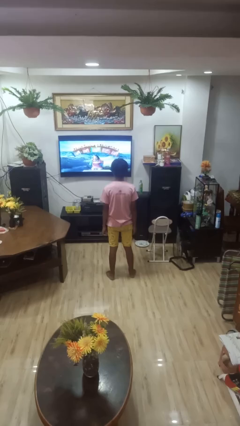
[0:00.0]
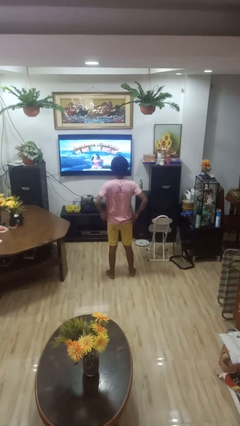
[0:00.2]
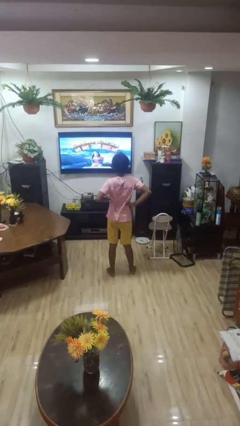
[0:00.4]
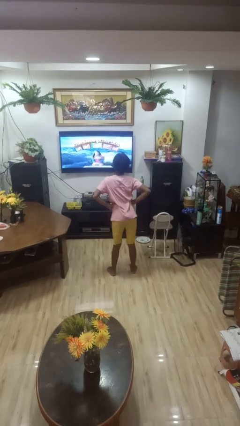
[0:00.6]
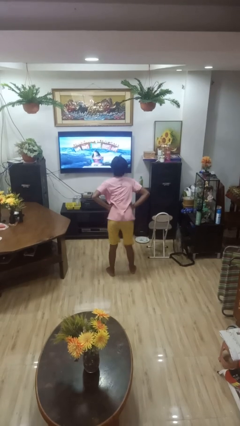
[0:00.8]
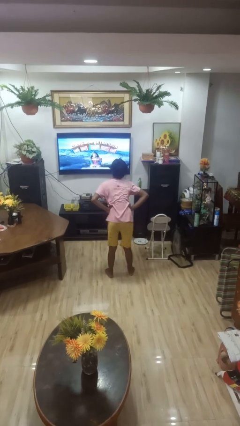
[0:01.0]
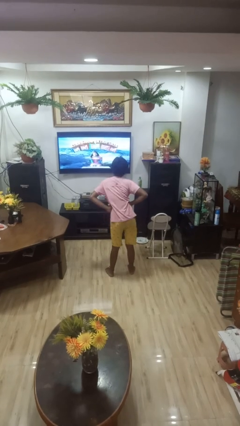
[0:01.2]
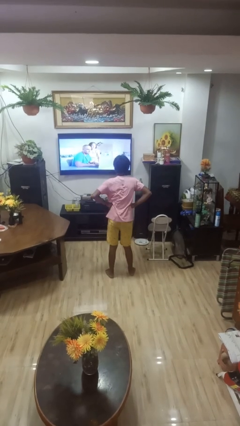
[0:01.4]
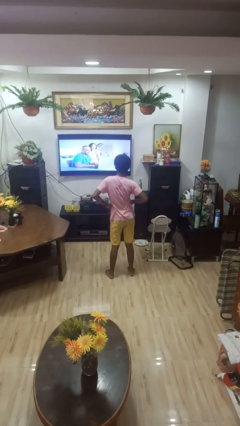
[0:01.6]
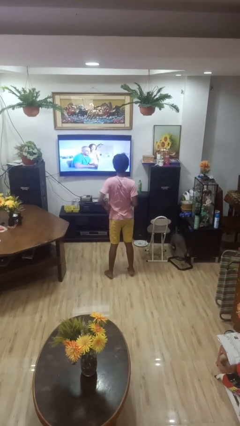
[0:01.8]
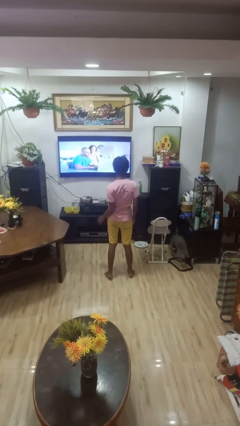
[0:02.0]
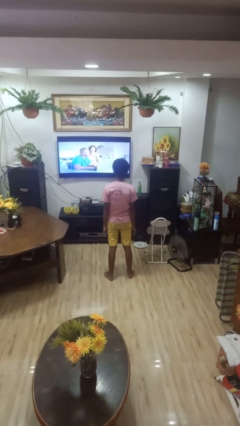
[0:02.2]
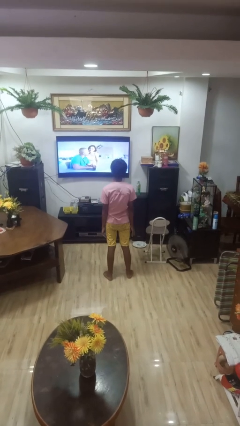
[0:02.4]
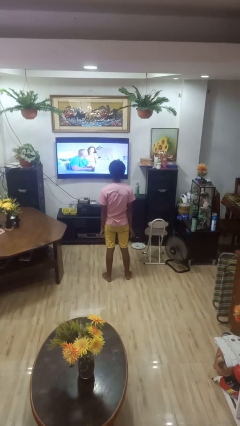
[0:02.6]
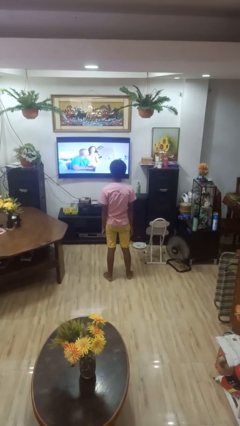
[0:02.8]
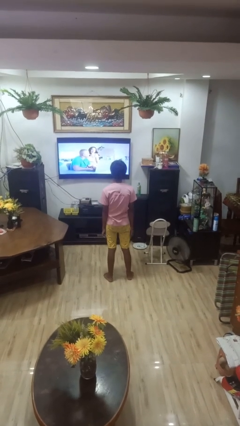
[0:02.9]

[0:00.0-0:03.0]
person wiggles hips

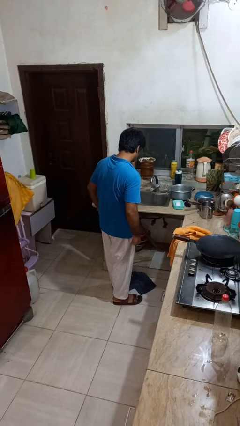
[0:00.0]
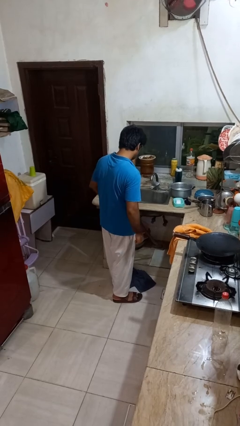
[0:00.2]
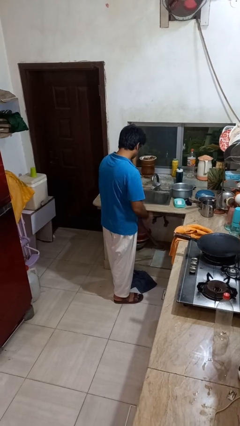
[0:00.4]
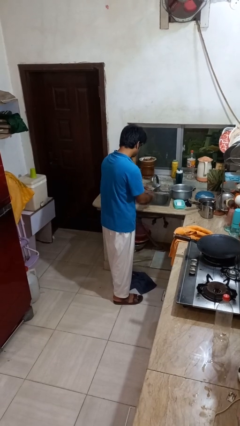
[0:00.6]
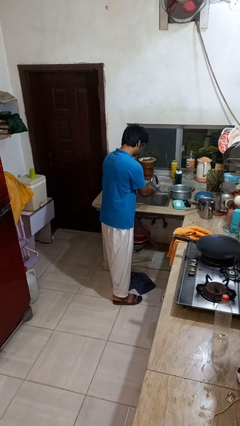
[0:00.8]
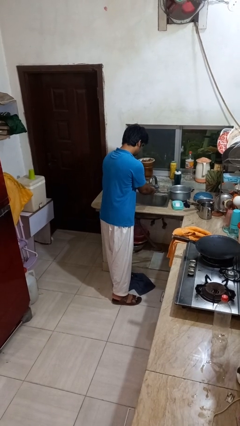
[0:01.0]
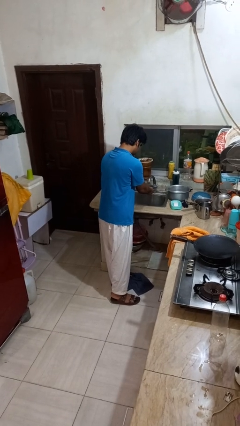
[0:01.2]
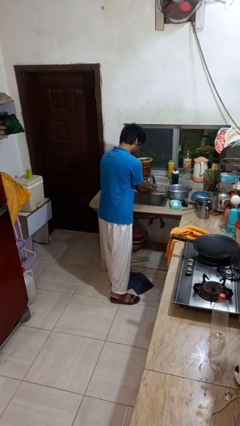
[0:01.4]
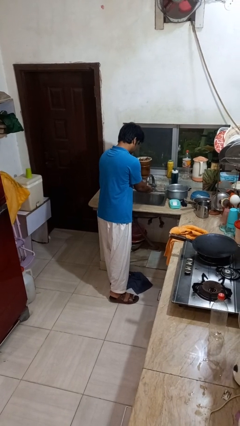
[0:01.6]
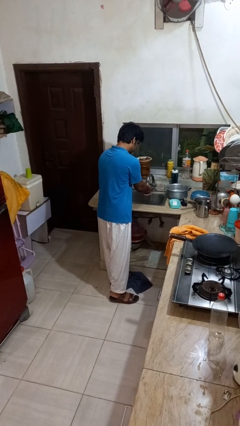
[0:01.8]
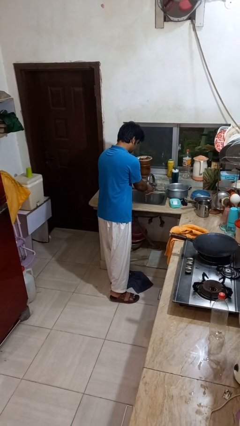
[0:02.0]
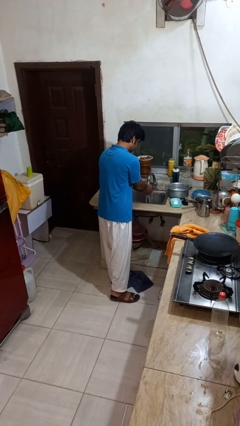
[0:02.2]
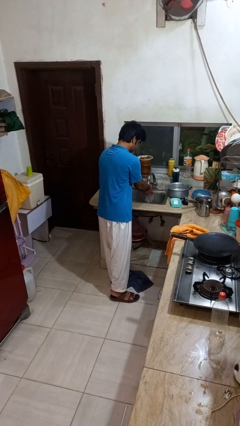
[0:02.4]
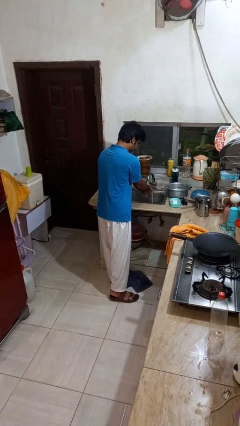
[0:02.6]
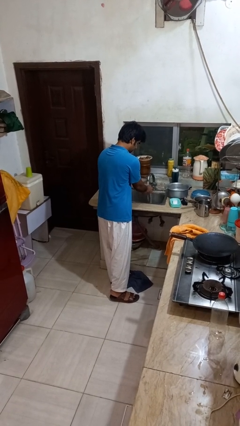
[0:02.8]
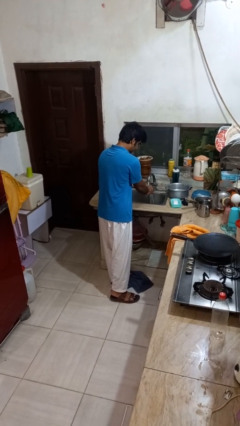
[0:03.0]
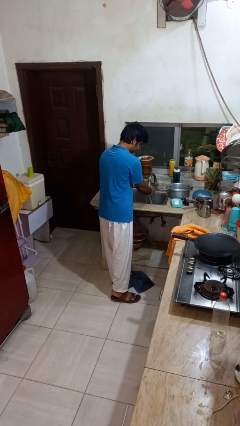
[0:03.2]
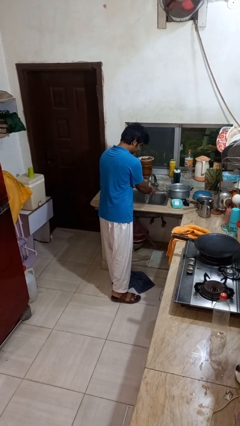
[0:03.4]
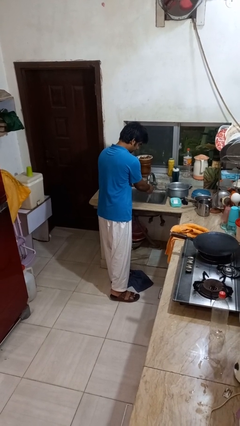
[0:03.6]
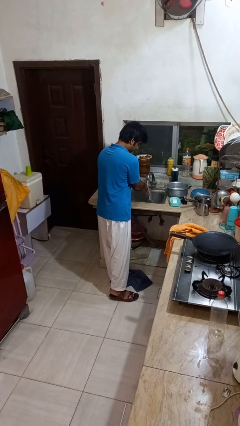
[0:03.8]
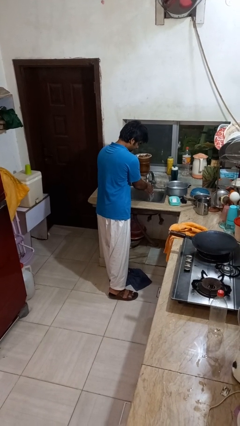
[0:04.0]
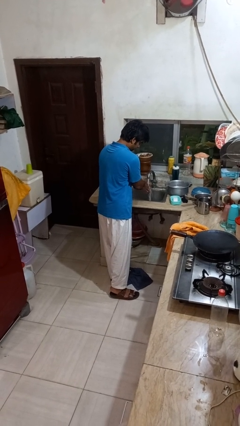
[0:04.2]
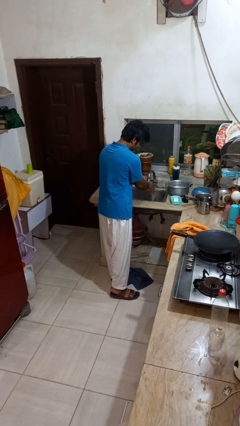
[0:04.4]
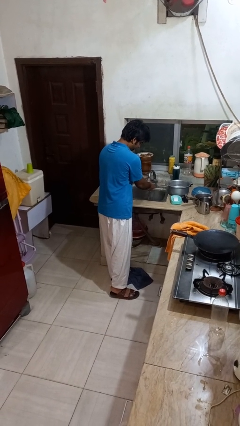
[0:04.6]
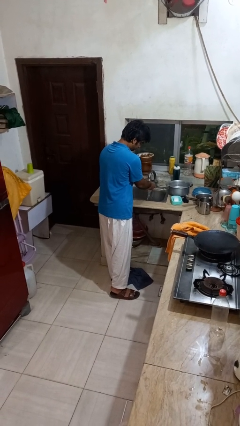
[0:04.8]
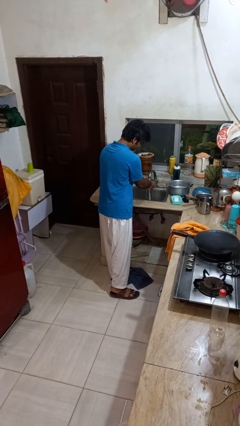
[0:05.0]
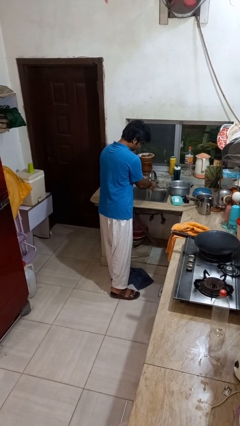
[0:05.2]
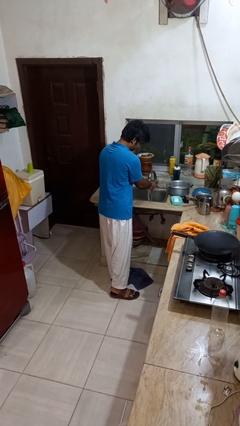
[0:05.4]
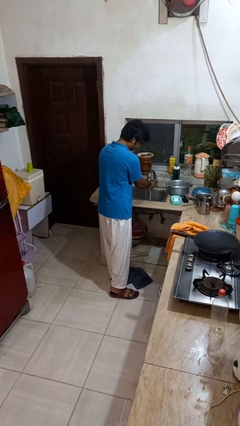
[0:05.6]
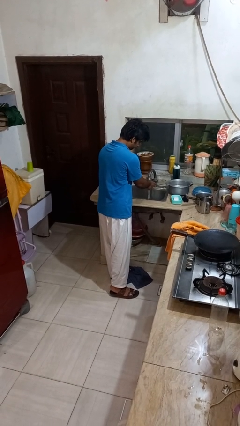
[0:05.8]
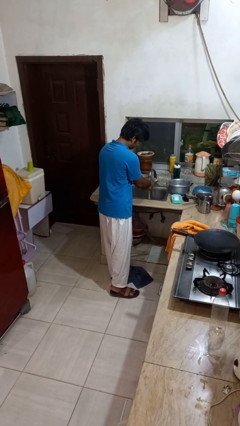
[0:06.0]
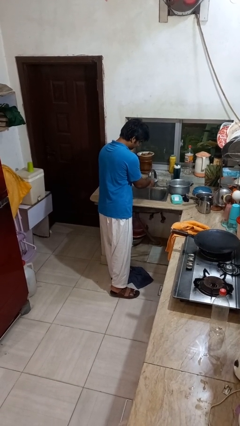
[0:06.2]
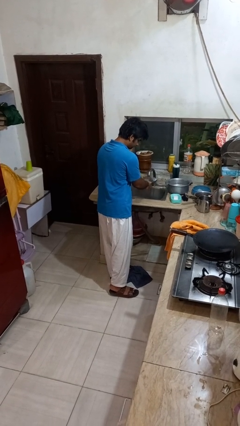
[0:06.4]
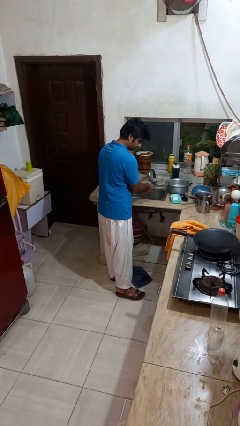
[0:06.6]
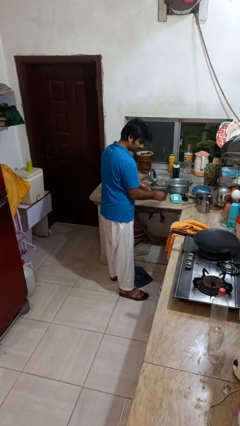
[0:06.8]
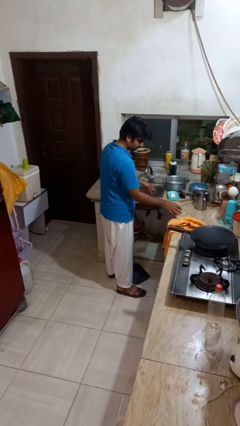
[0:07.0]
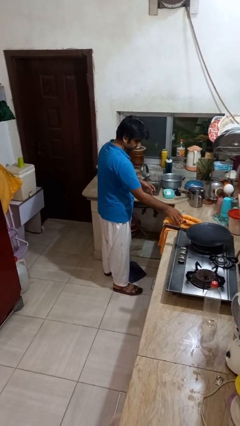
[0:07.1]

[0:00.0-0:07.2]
person washes hands

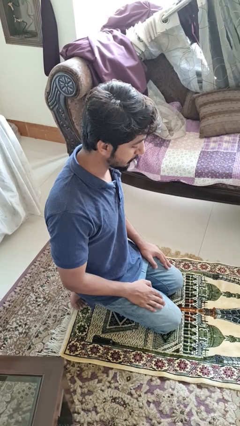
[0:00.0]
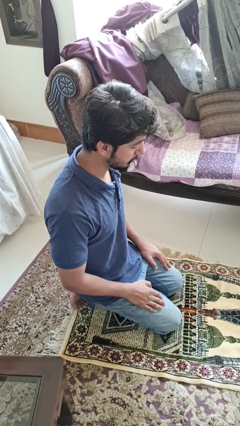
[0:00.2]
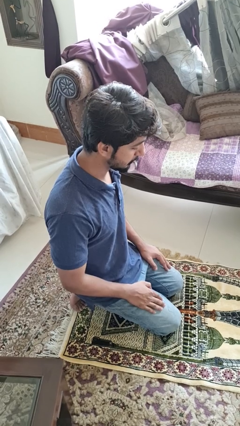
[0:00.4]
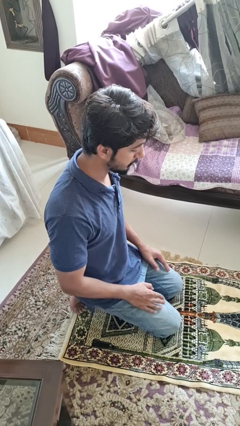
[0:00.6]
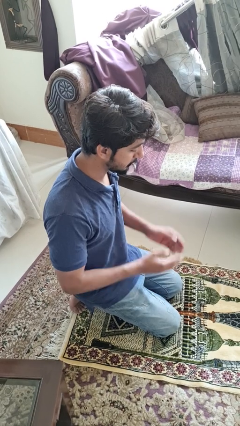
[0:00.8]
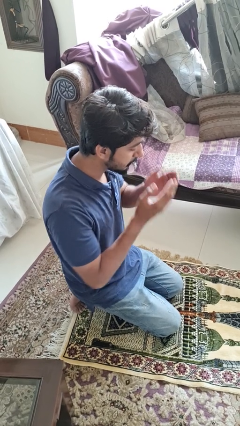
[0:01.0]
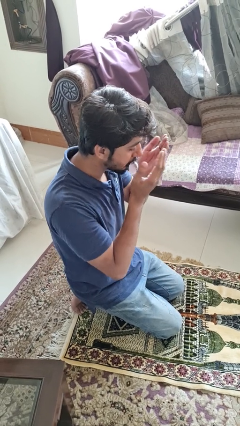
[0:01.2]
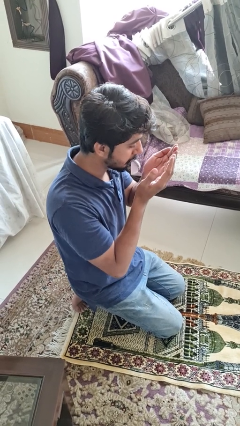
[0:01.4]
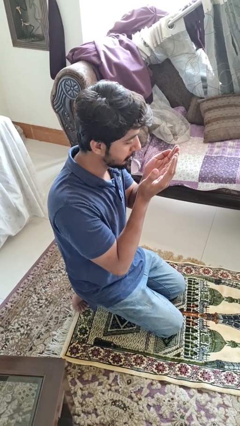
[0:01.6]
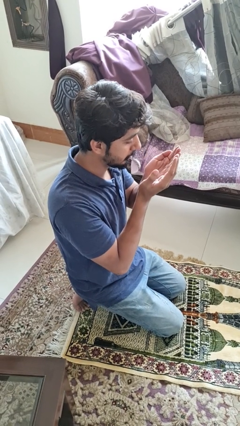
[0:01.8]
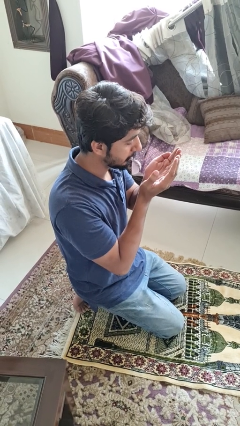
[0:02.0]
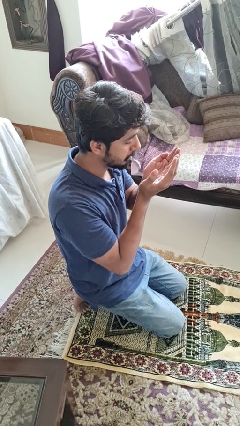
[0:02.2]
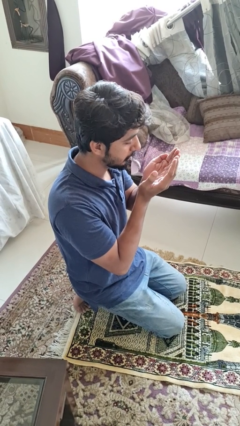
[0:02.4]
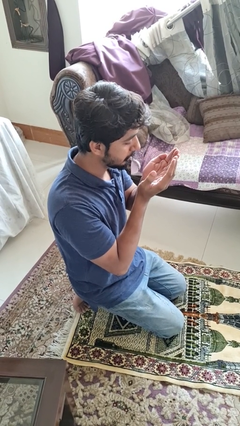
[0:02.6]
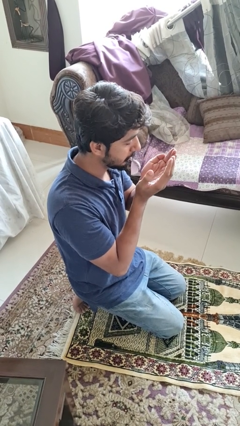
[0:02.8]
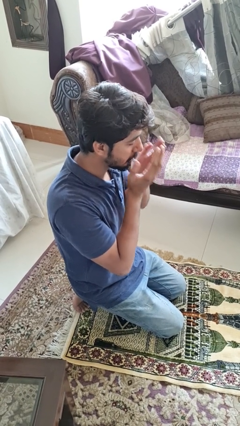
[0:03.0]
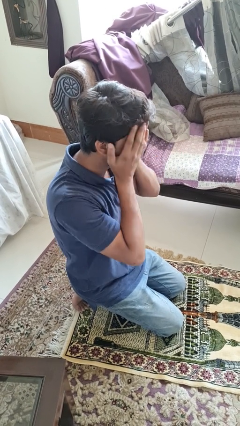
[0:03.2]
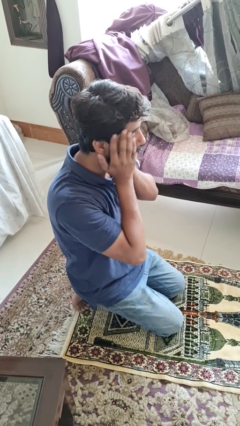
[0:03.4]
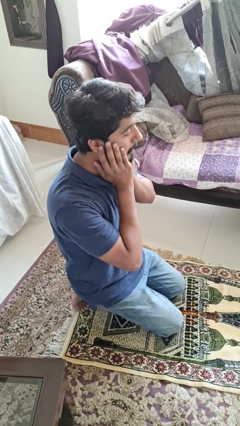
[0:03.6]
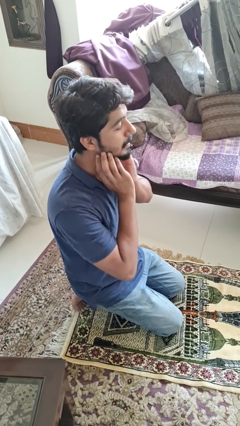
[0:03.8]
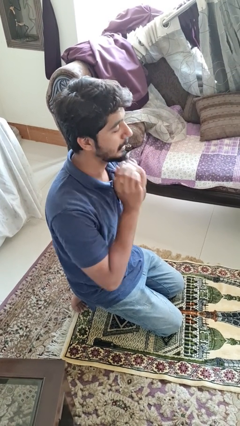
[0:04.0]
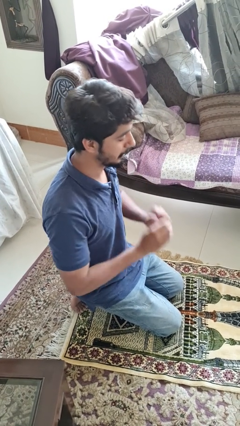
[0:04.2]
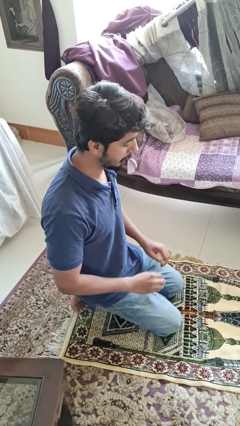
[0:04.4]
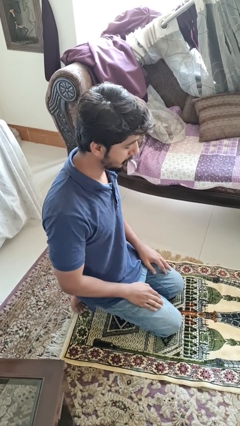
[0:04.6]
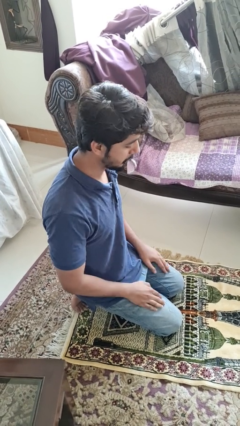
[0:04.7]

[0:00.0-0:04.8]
person prays

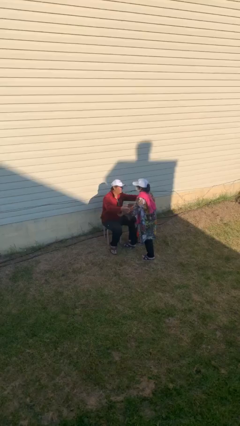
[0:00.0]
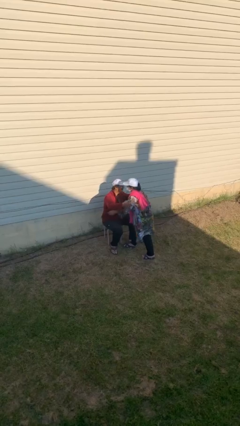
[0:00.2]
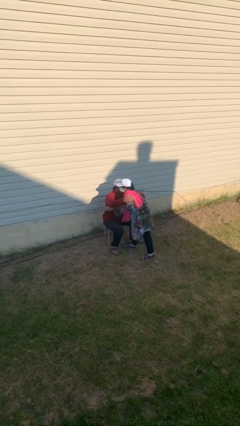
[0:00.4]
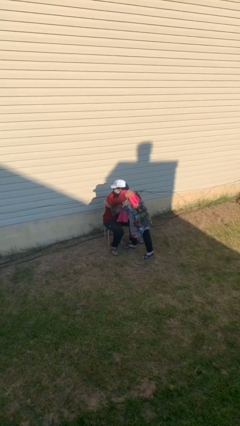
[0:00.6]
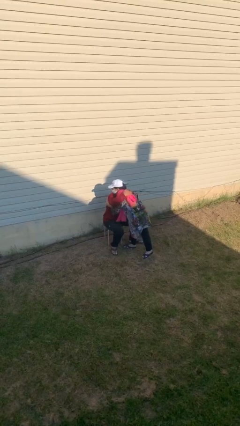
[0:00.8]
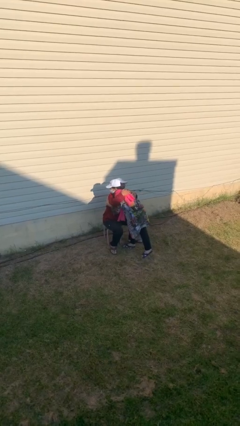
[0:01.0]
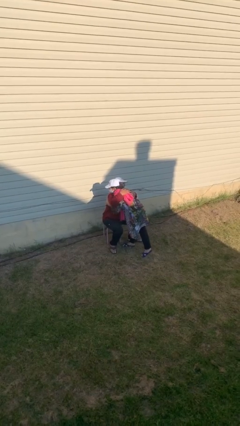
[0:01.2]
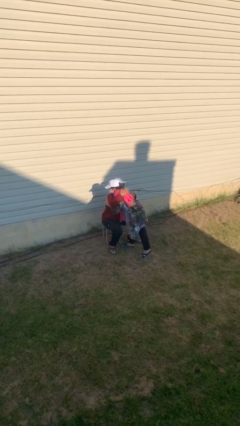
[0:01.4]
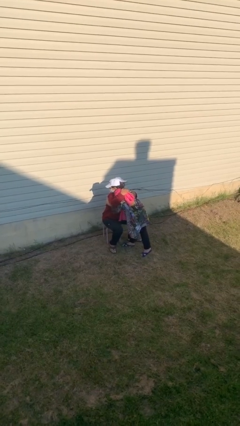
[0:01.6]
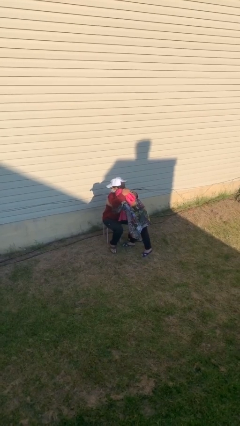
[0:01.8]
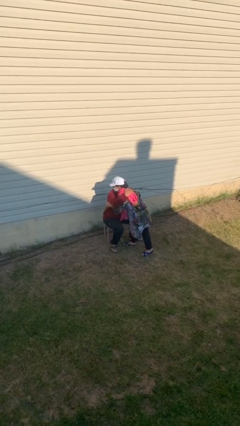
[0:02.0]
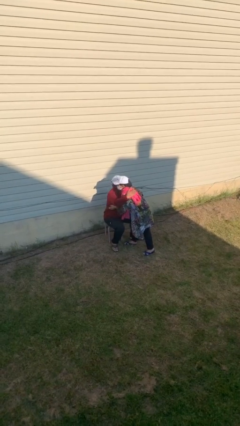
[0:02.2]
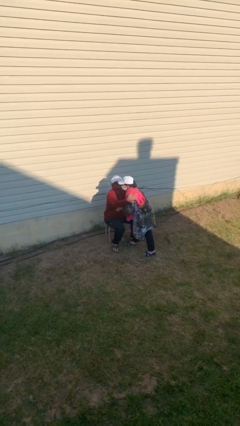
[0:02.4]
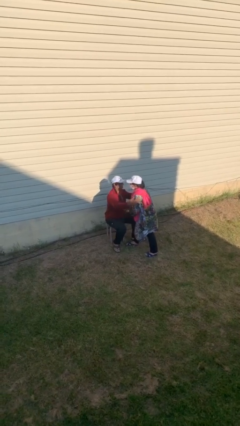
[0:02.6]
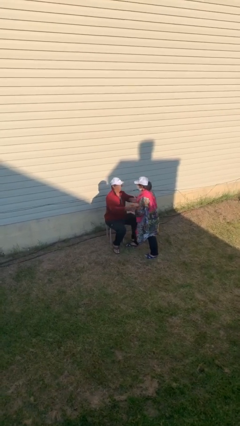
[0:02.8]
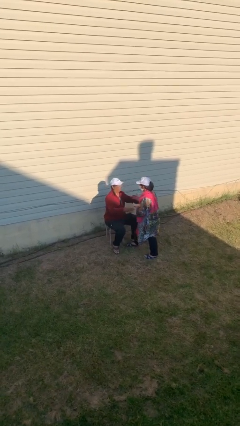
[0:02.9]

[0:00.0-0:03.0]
person embraces person
